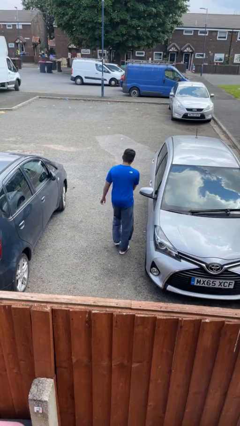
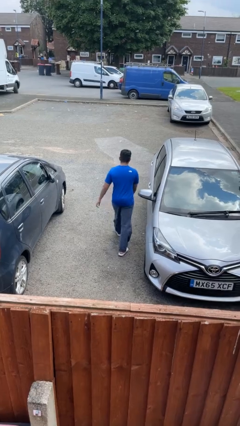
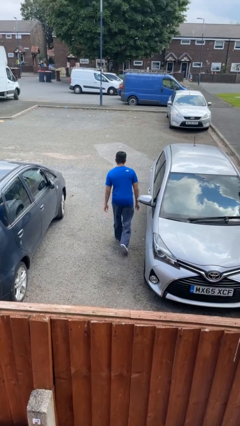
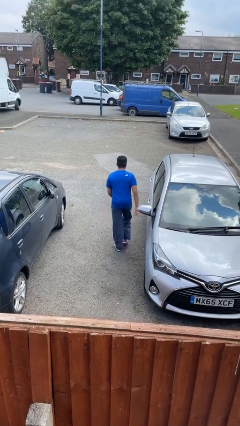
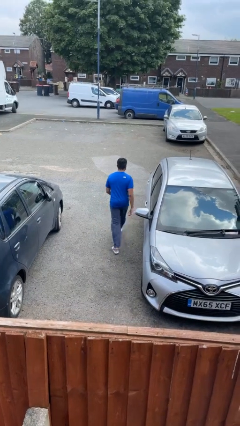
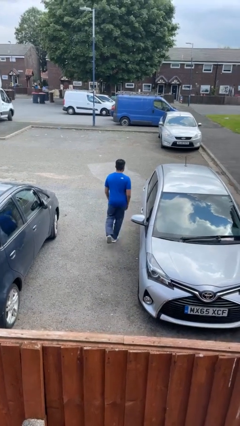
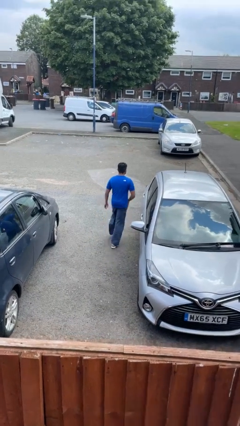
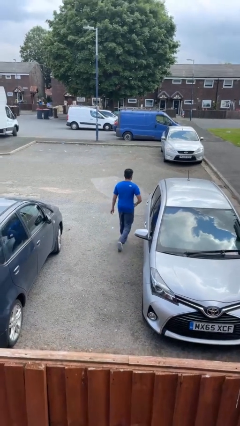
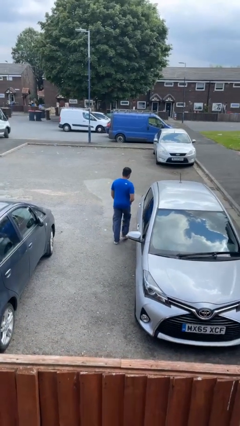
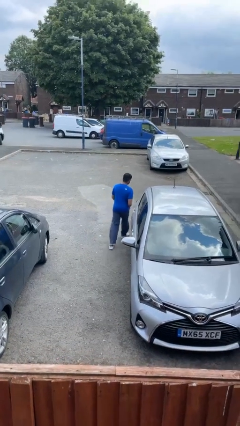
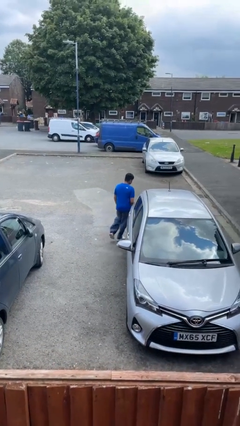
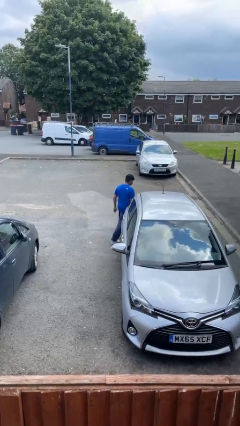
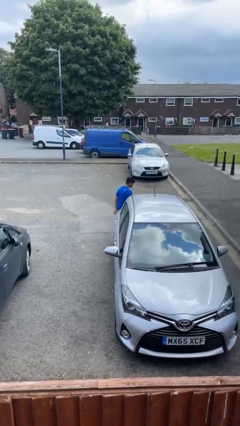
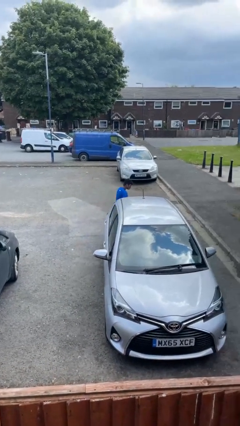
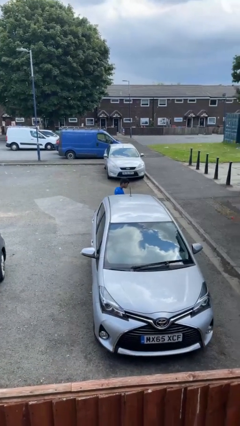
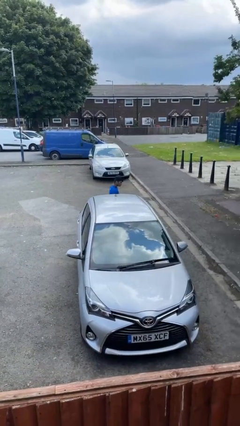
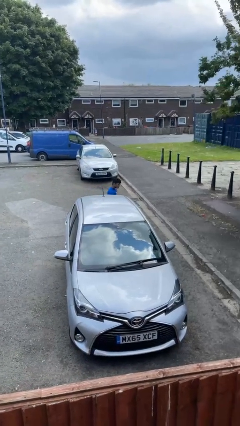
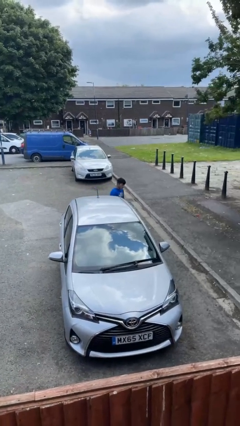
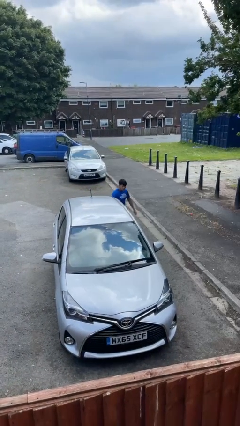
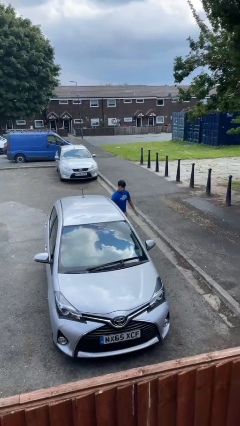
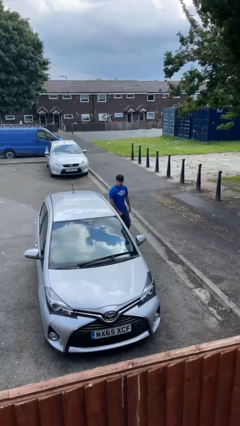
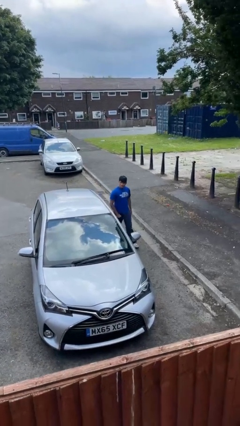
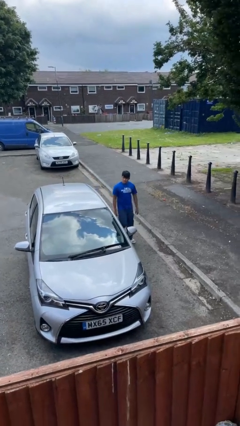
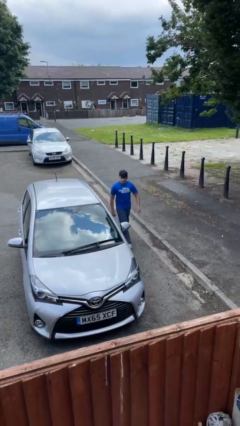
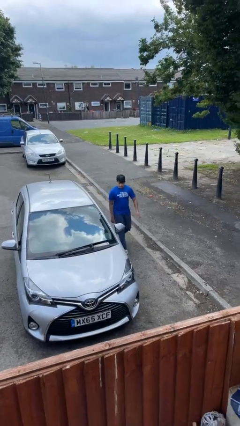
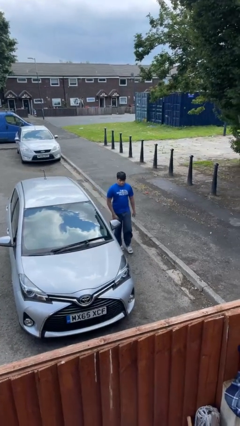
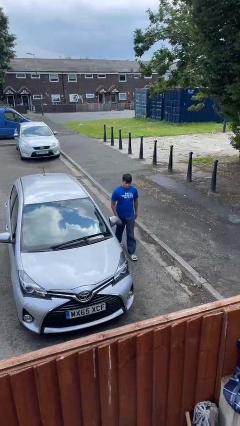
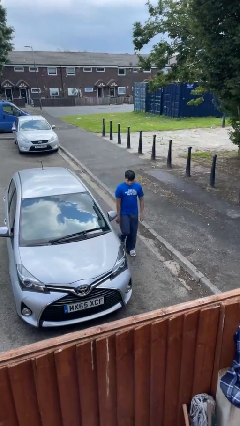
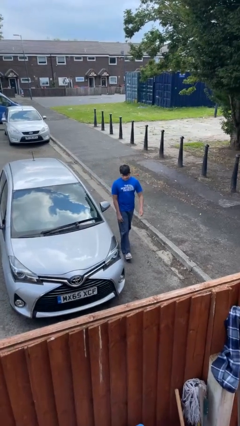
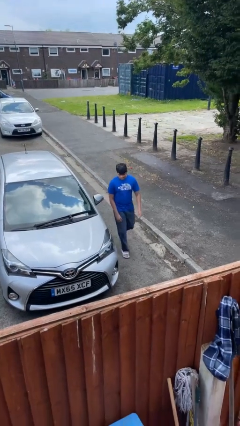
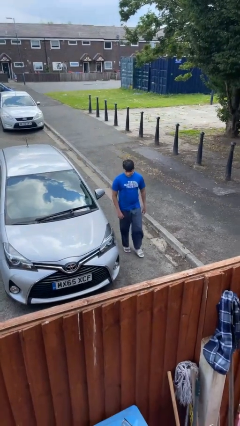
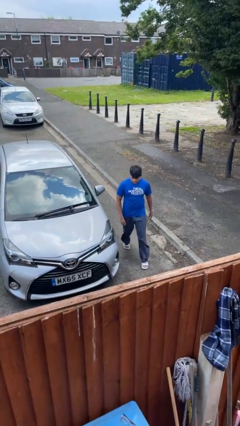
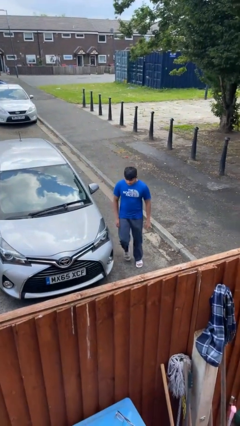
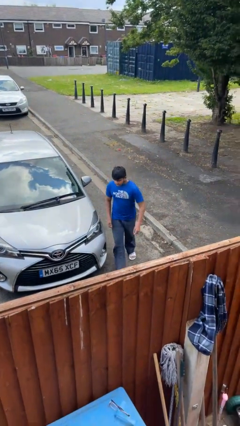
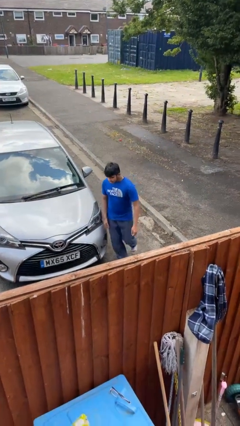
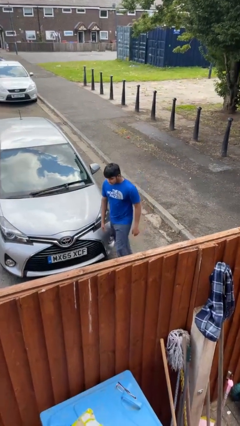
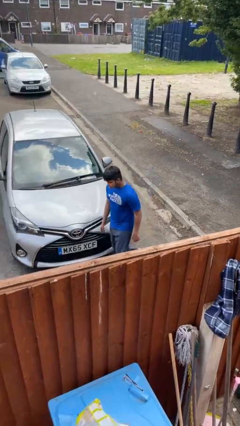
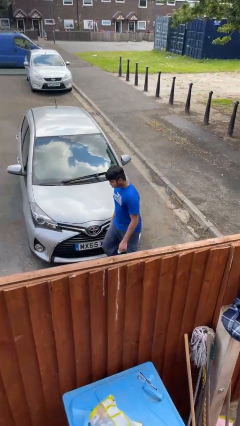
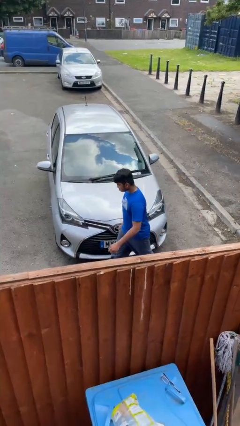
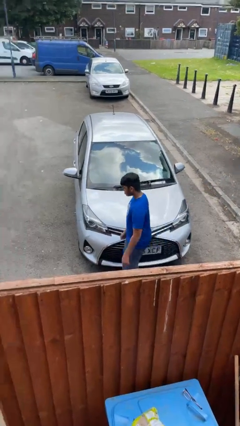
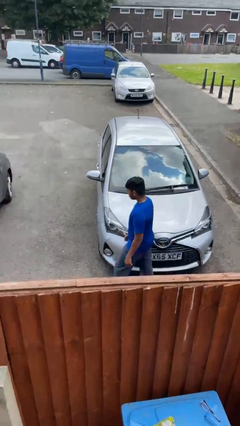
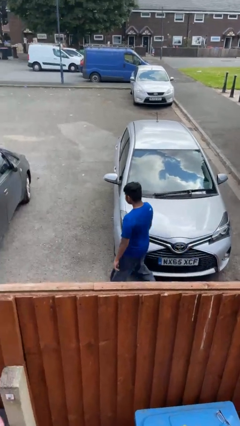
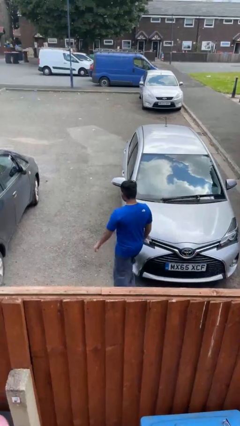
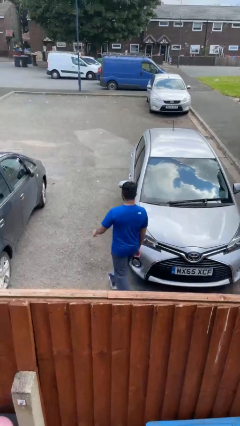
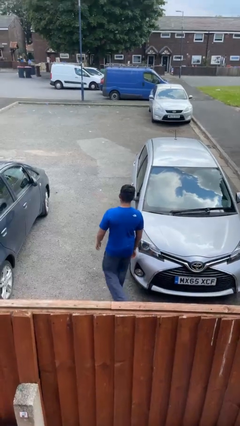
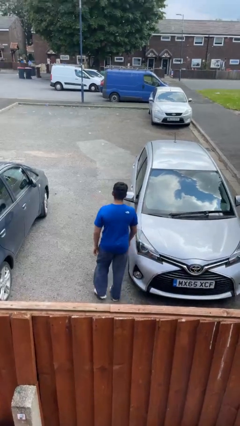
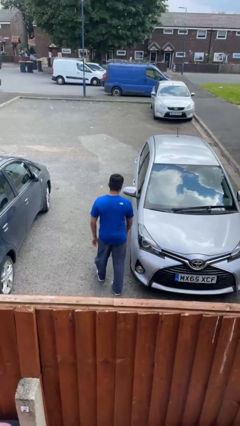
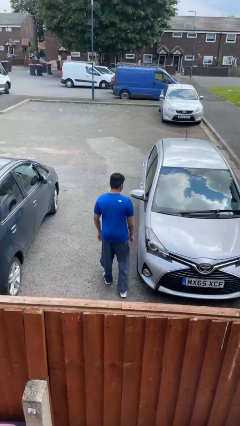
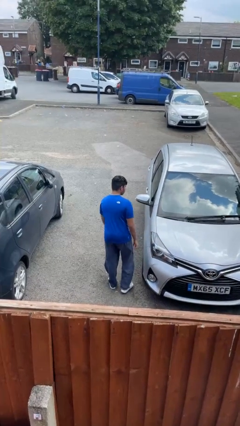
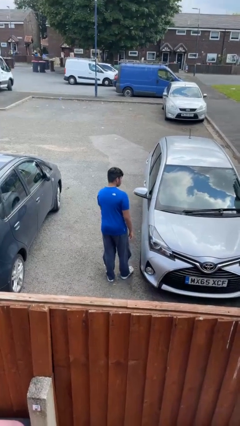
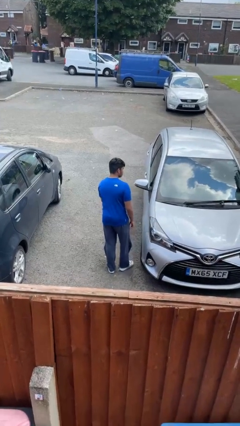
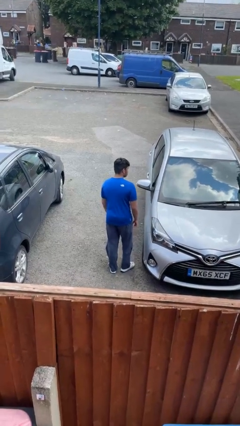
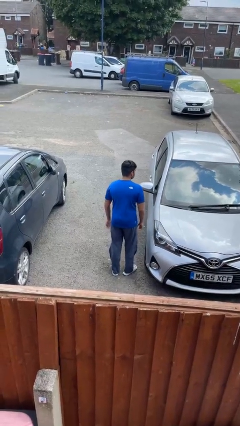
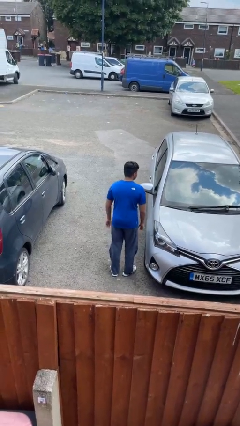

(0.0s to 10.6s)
person walks around car

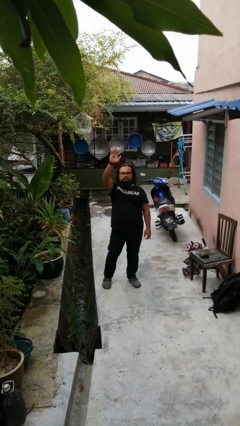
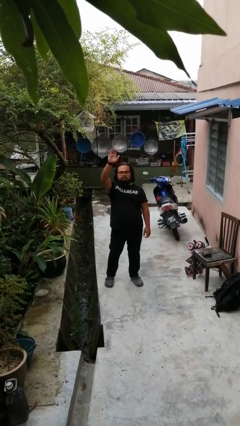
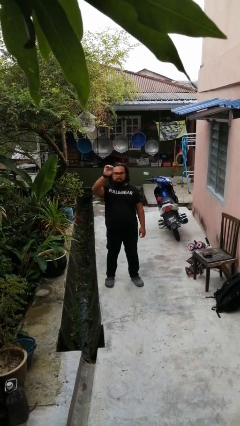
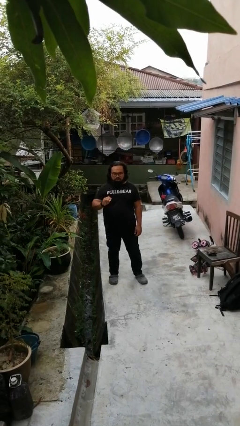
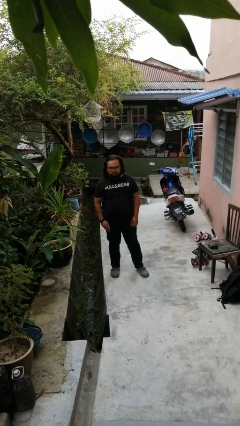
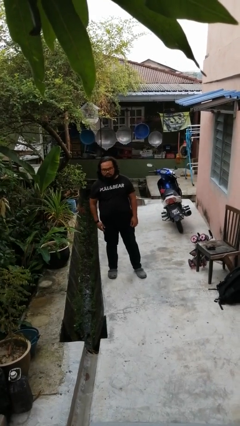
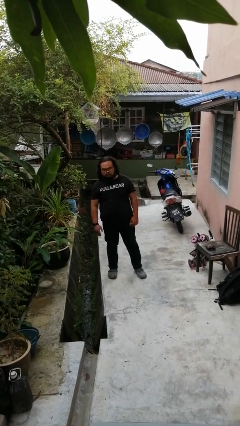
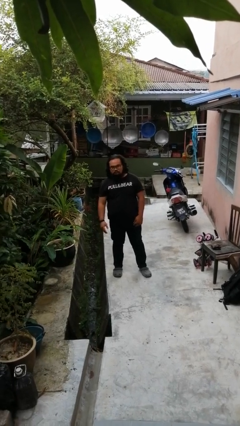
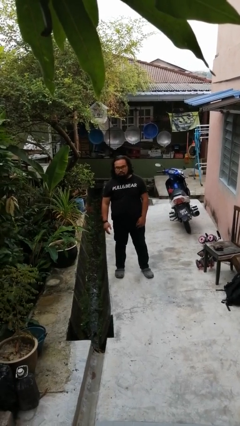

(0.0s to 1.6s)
person gestures lower hand

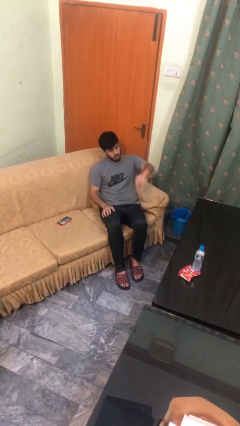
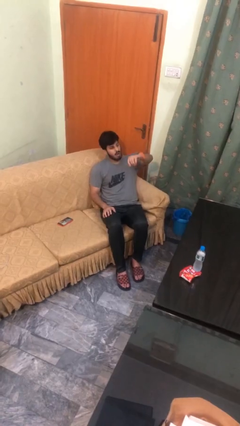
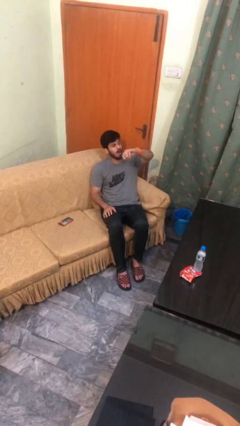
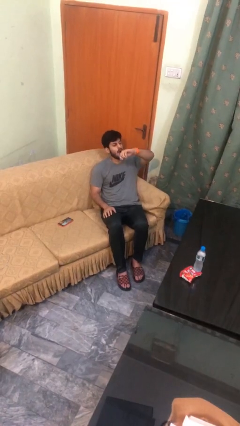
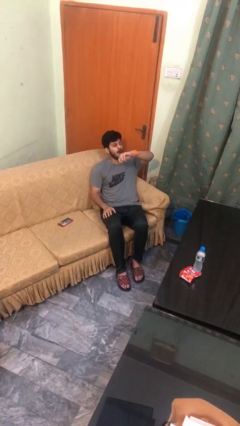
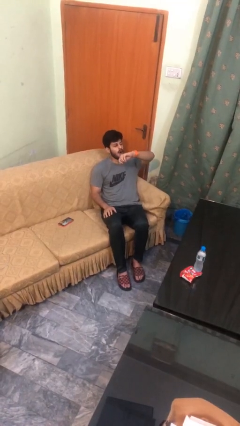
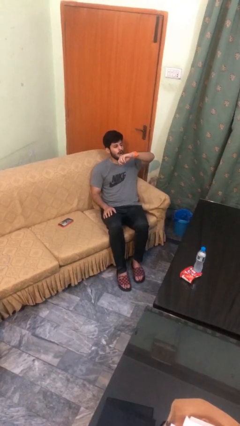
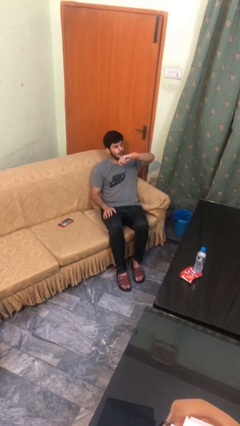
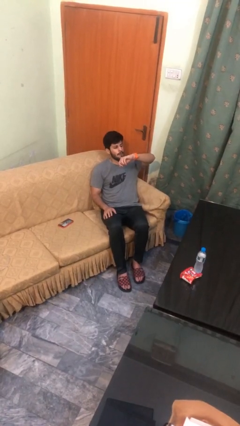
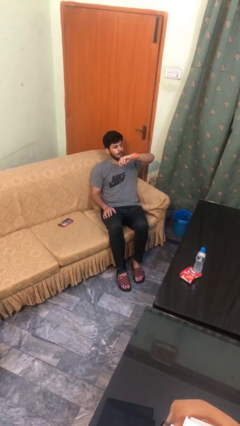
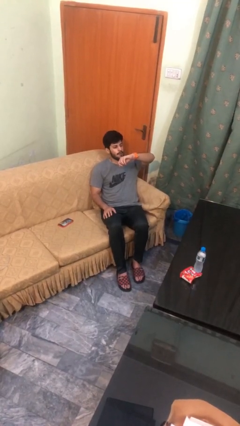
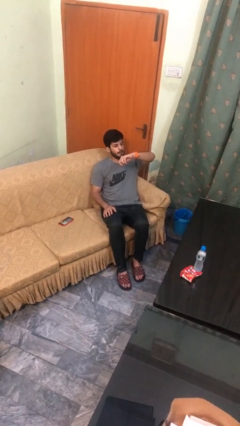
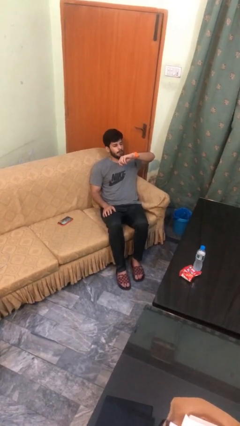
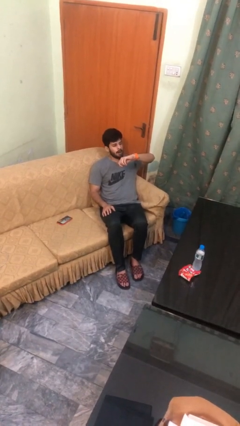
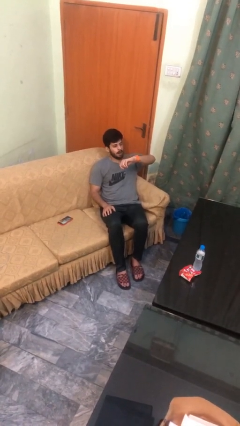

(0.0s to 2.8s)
person looks at wristwatch

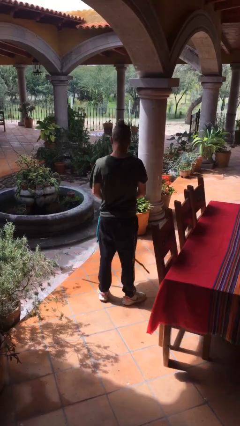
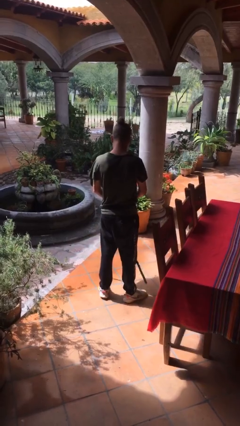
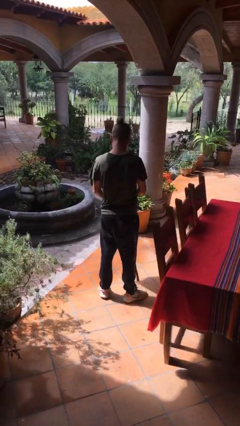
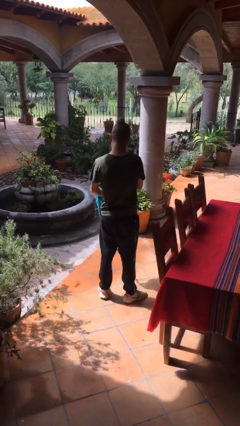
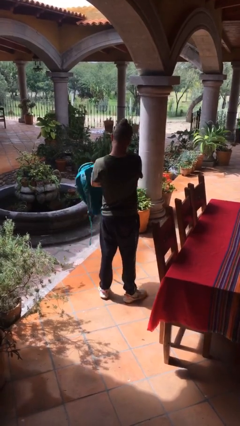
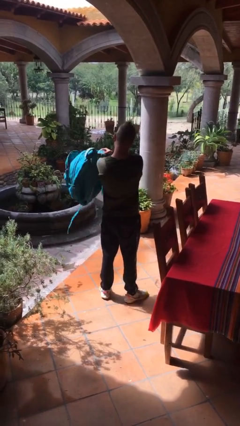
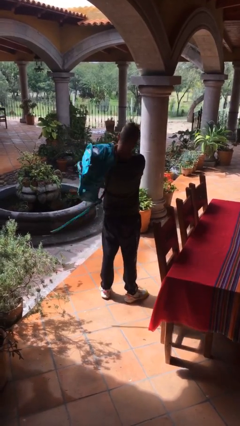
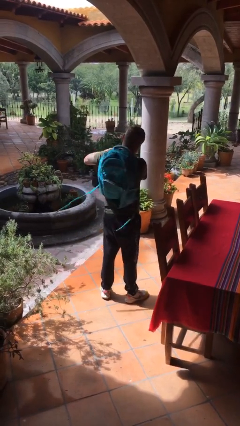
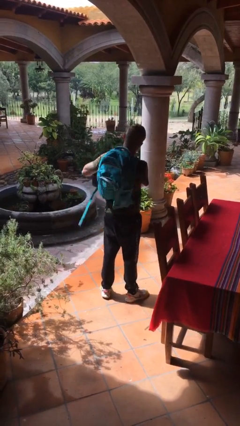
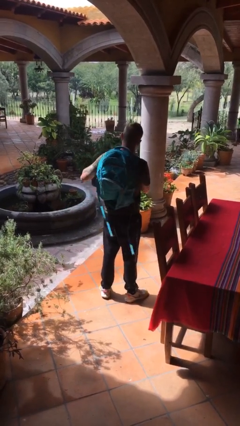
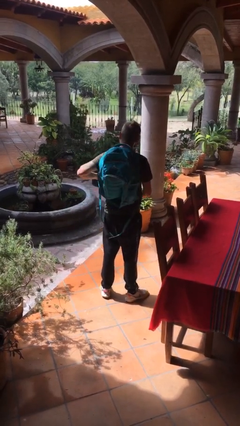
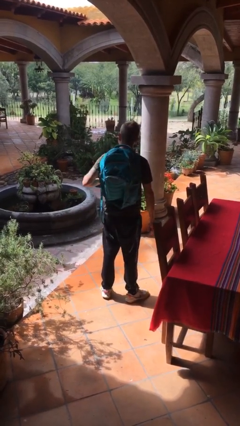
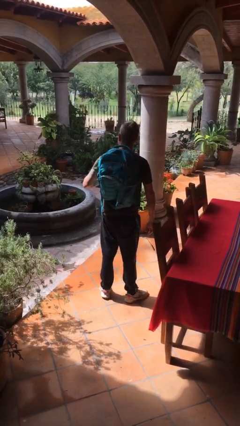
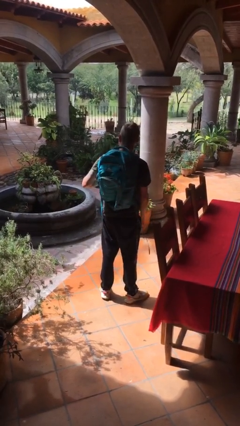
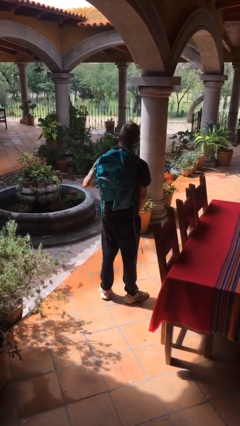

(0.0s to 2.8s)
person puts on backpack

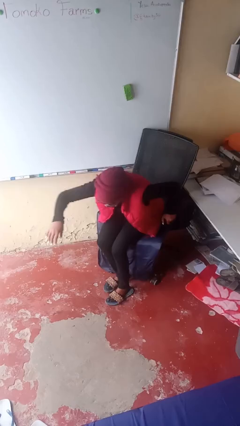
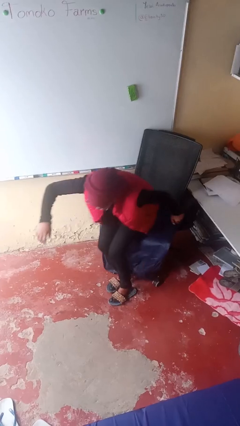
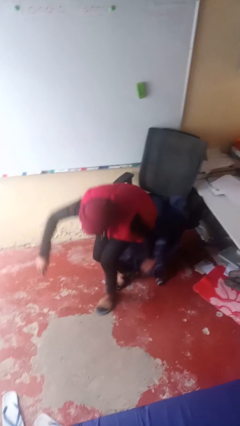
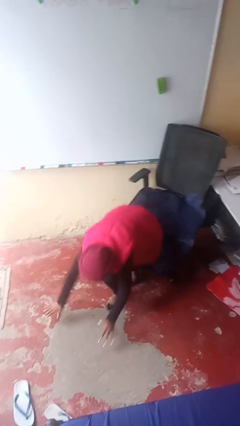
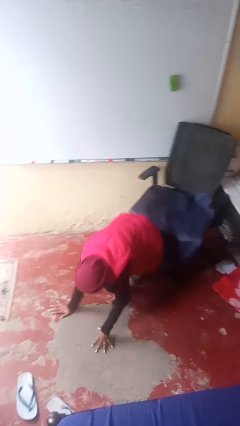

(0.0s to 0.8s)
person falls from chair
